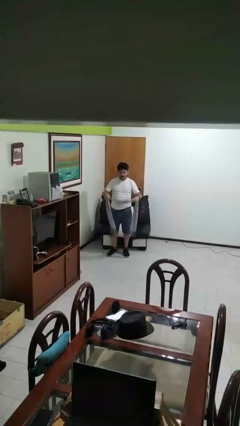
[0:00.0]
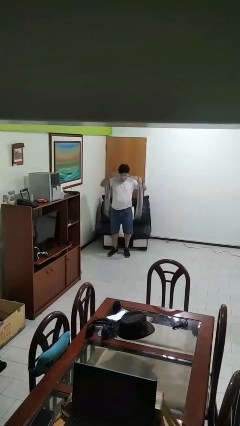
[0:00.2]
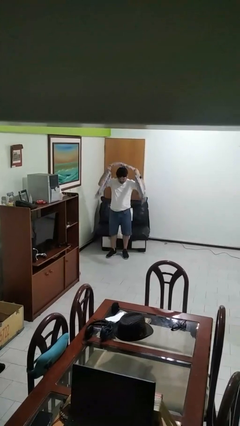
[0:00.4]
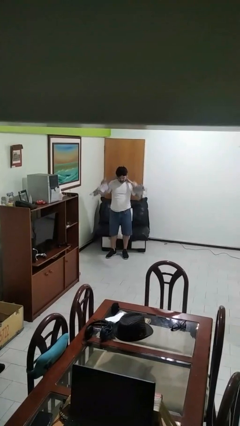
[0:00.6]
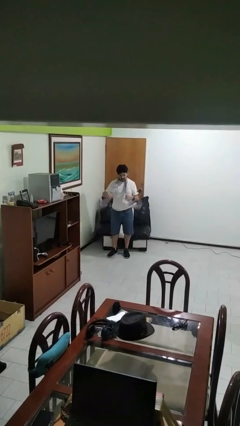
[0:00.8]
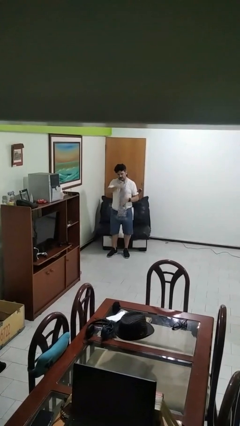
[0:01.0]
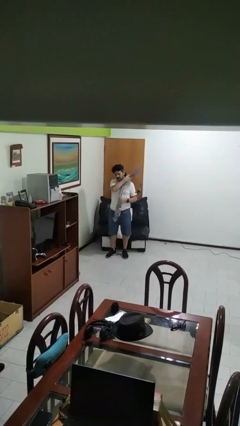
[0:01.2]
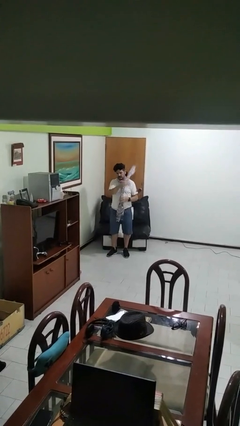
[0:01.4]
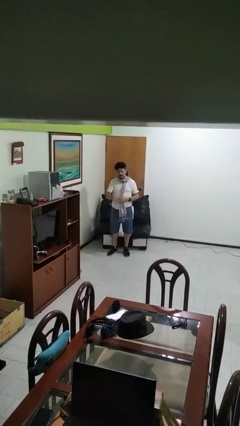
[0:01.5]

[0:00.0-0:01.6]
person puts on scarf

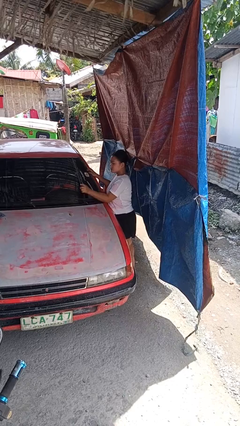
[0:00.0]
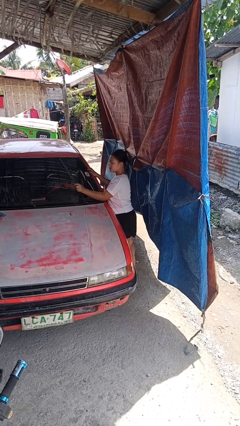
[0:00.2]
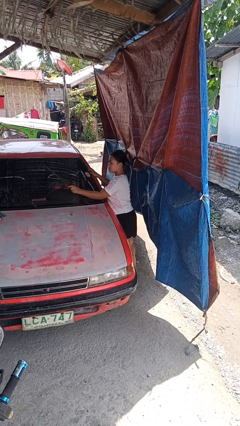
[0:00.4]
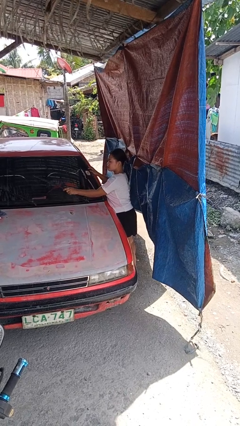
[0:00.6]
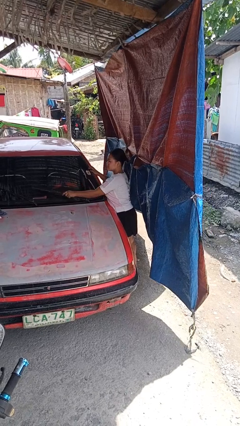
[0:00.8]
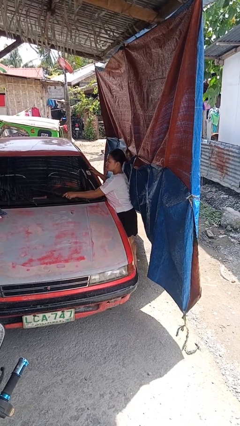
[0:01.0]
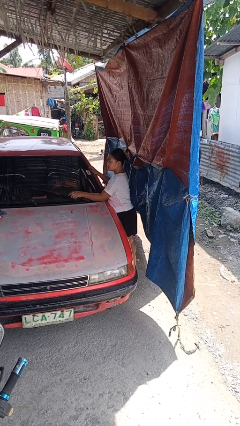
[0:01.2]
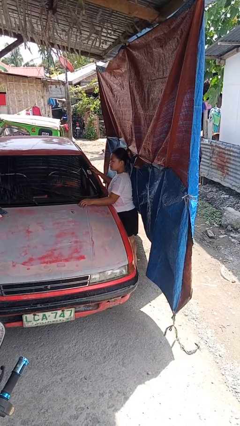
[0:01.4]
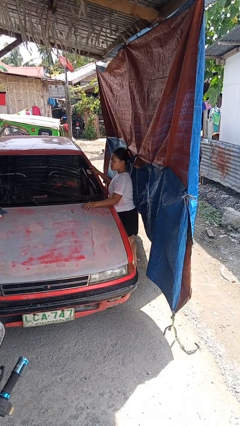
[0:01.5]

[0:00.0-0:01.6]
person flips down car wipers

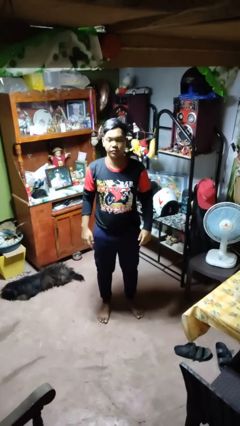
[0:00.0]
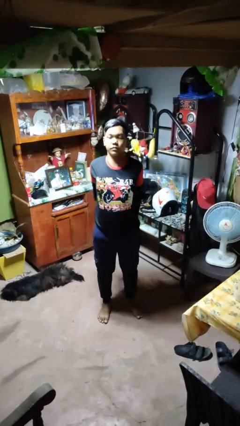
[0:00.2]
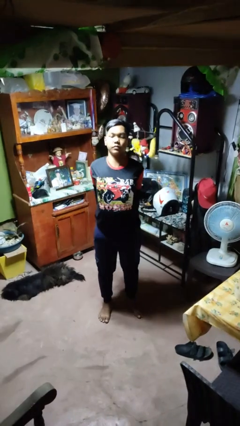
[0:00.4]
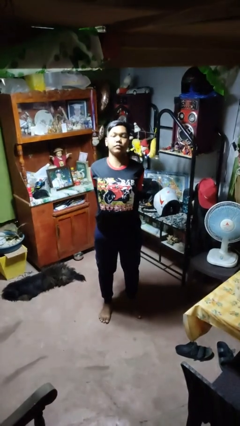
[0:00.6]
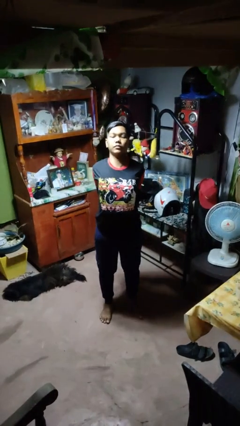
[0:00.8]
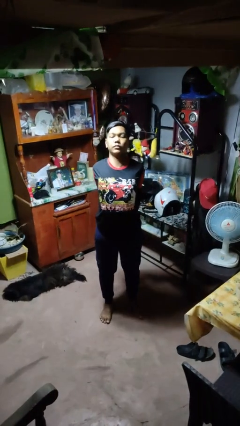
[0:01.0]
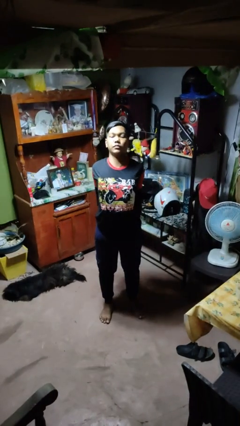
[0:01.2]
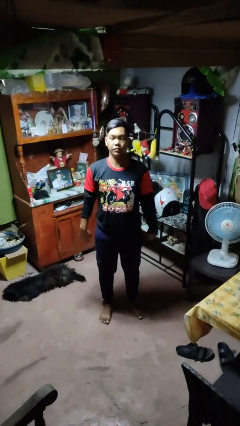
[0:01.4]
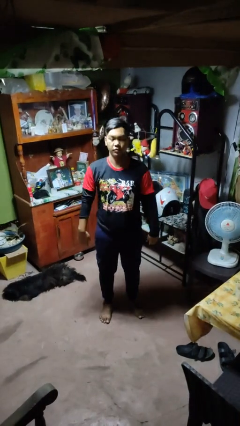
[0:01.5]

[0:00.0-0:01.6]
person stretches back

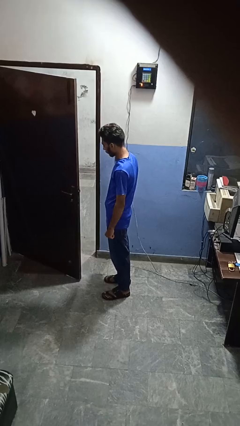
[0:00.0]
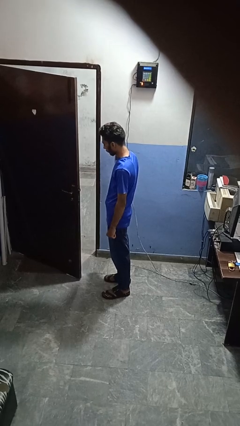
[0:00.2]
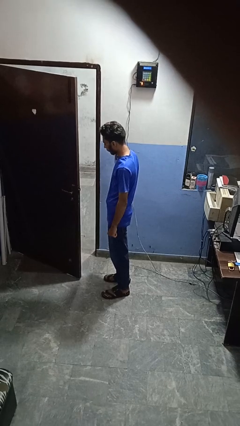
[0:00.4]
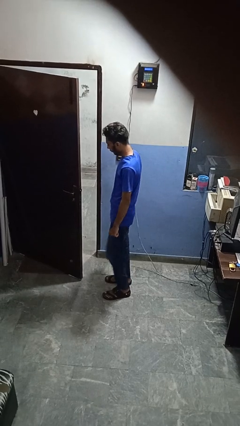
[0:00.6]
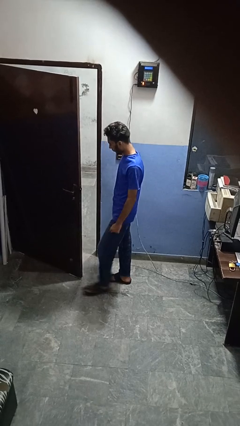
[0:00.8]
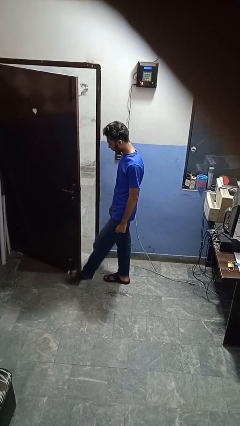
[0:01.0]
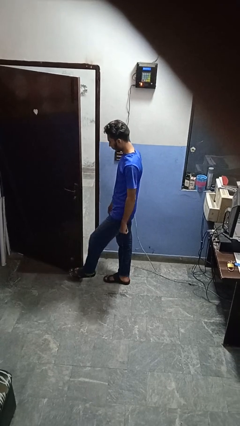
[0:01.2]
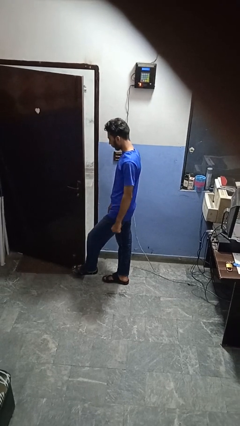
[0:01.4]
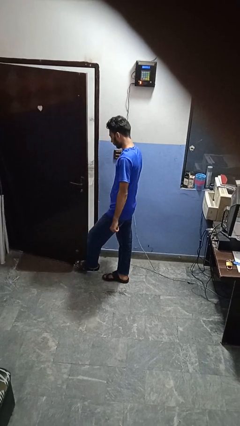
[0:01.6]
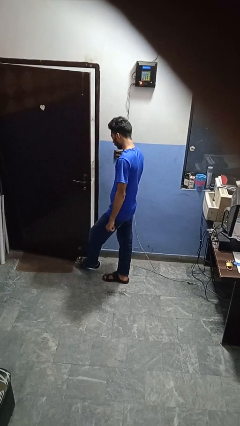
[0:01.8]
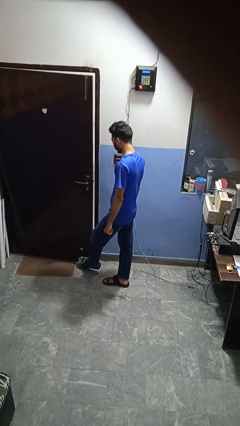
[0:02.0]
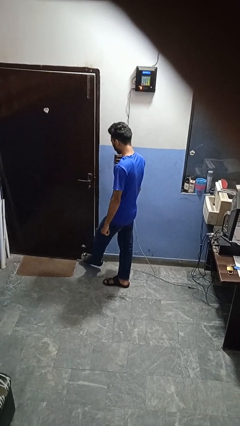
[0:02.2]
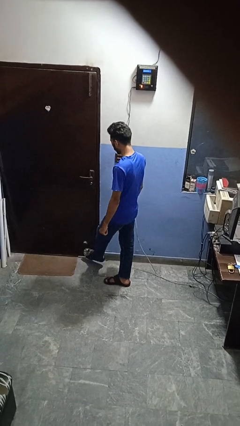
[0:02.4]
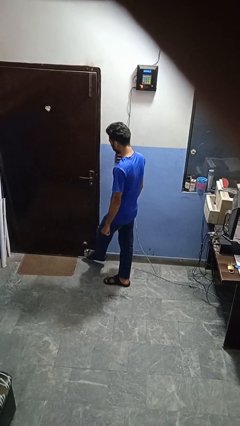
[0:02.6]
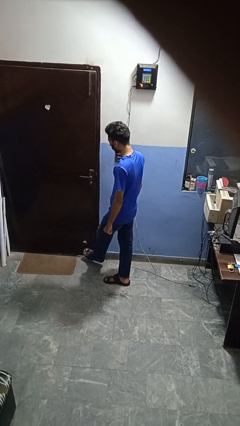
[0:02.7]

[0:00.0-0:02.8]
person closes door with foot

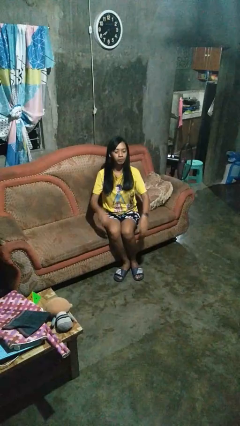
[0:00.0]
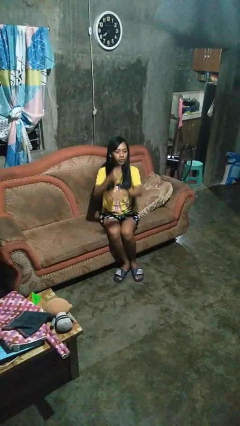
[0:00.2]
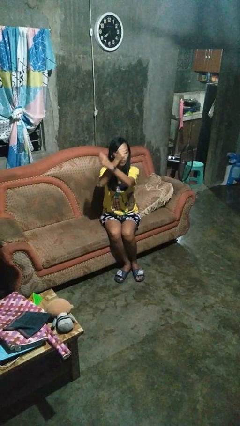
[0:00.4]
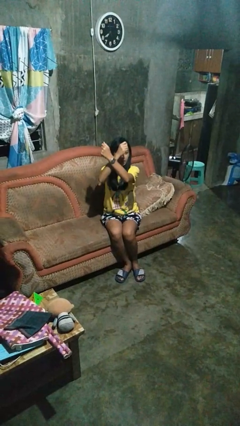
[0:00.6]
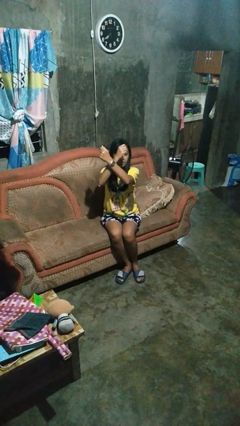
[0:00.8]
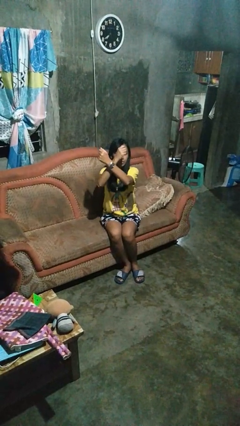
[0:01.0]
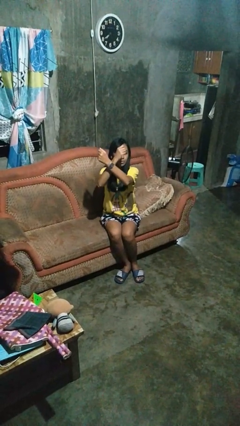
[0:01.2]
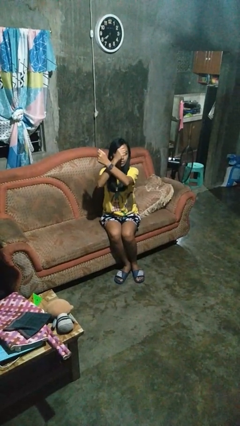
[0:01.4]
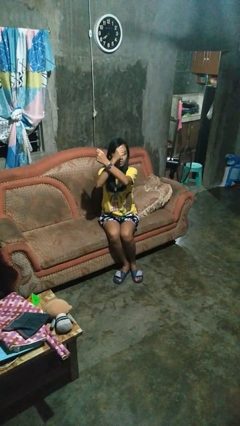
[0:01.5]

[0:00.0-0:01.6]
person gestures arms x

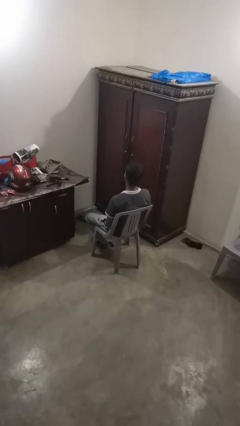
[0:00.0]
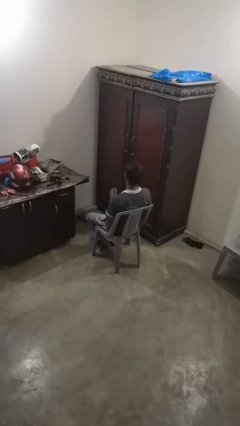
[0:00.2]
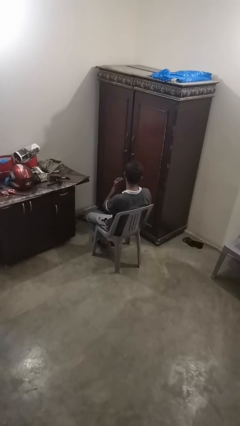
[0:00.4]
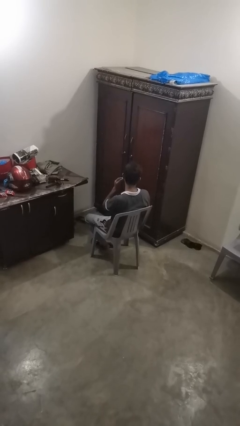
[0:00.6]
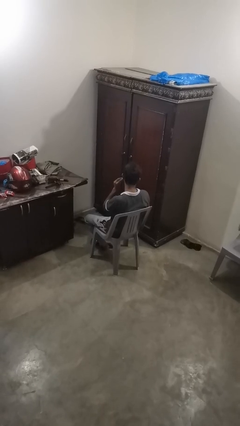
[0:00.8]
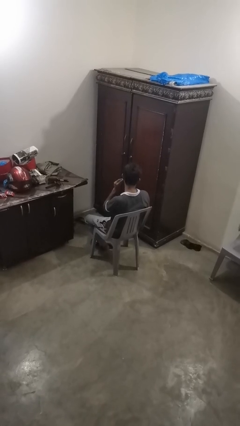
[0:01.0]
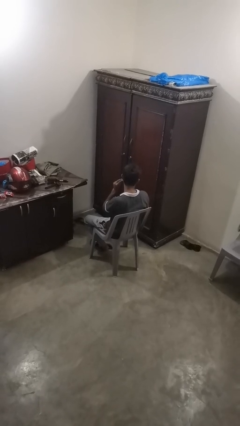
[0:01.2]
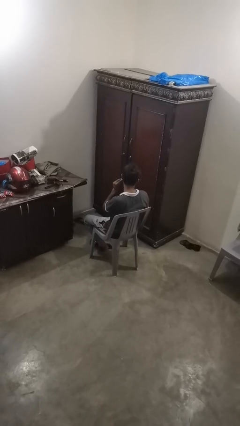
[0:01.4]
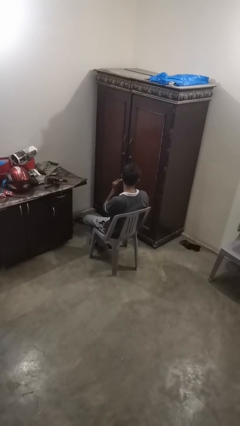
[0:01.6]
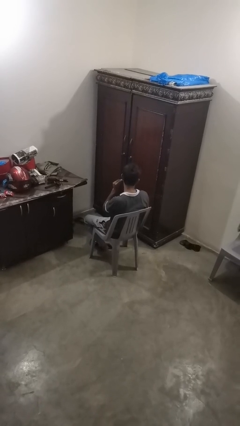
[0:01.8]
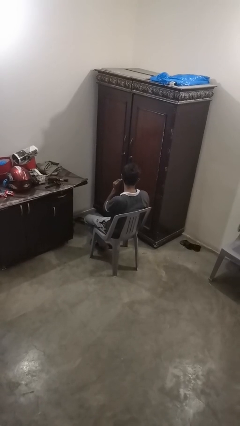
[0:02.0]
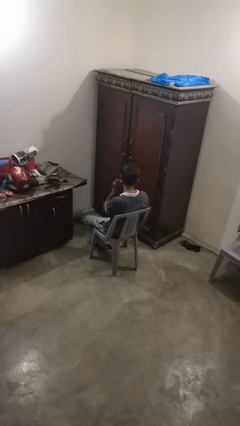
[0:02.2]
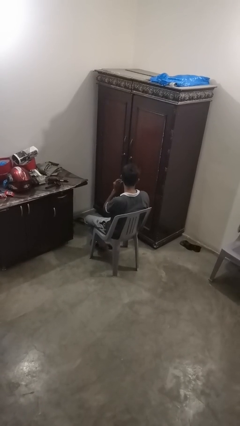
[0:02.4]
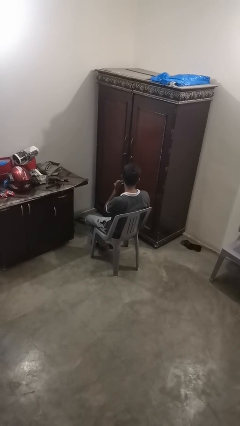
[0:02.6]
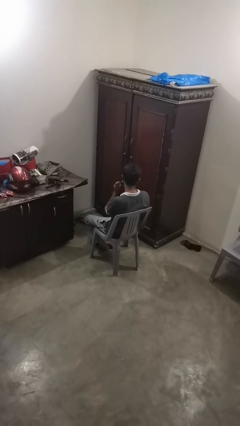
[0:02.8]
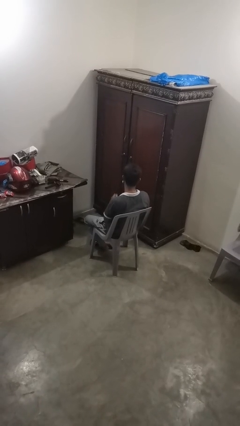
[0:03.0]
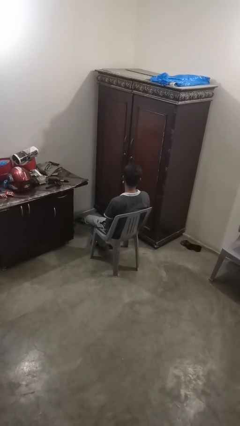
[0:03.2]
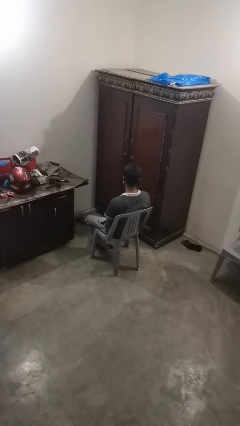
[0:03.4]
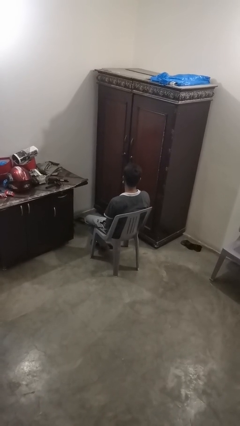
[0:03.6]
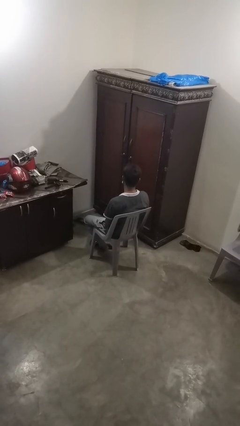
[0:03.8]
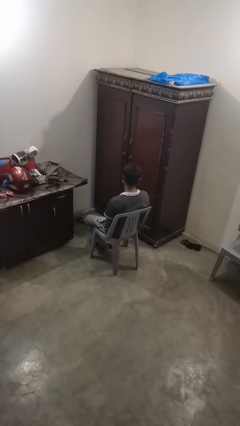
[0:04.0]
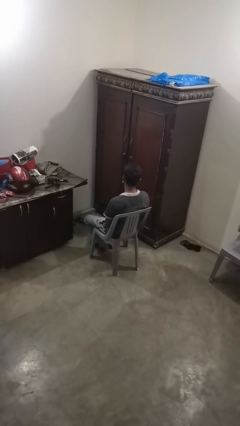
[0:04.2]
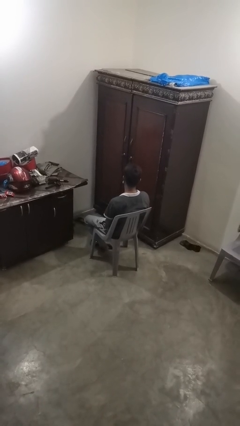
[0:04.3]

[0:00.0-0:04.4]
person puts on earrings

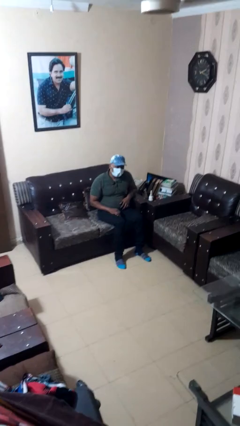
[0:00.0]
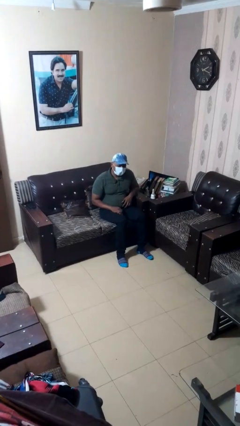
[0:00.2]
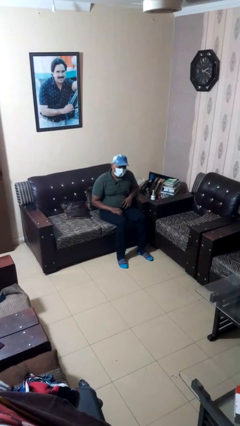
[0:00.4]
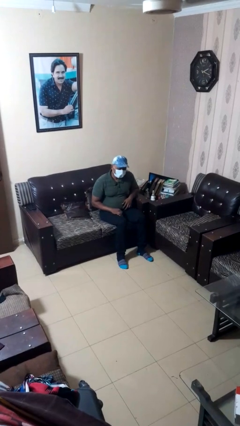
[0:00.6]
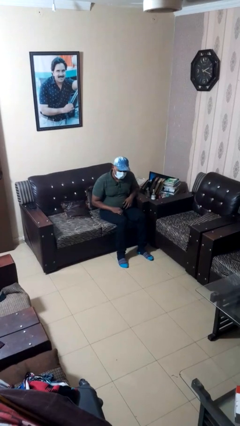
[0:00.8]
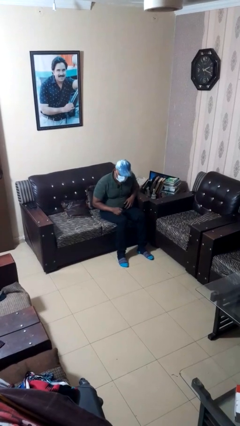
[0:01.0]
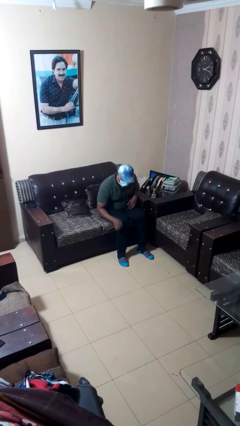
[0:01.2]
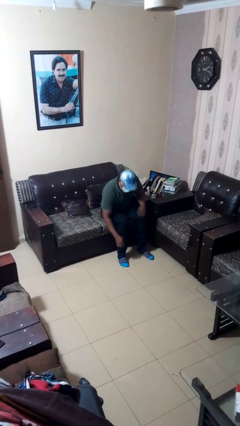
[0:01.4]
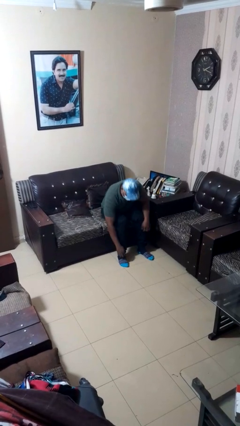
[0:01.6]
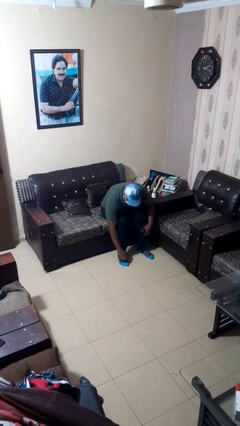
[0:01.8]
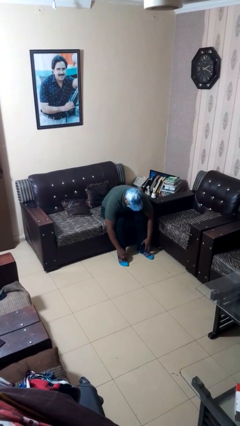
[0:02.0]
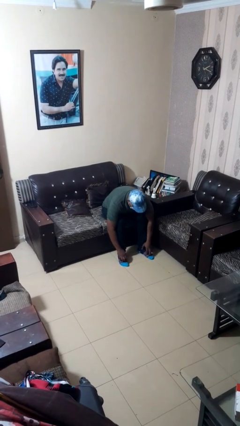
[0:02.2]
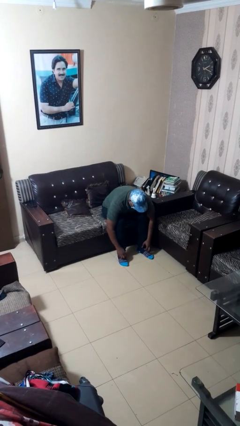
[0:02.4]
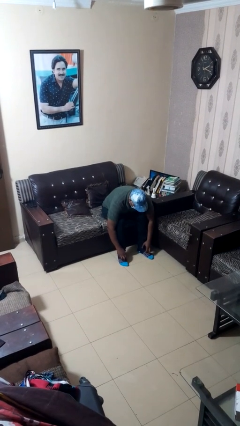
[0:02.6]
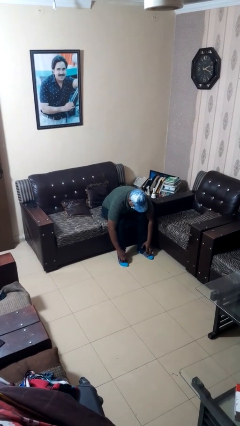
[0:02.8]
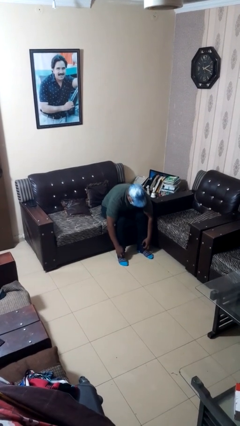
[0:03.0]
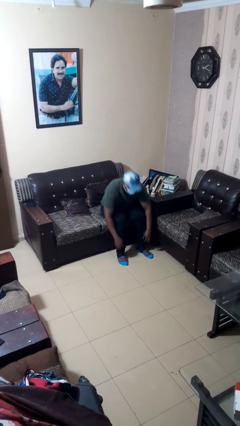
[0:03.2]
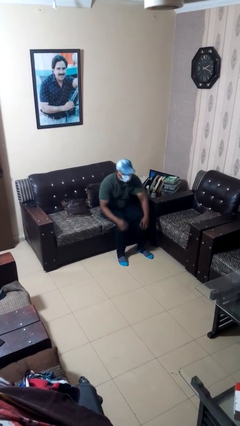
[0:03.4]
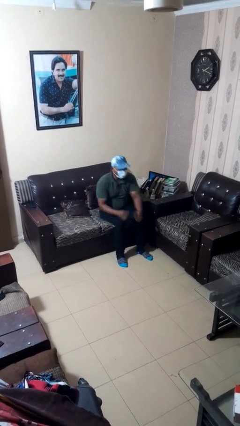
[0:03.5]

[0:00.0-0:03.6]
person rubs foot
